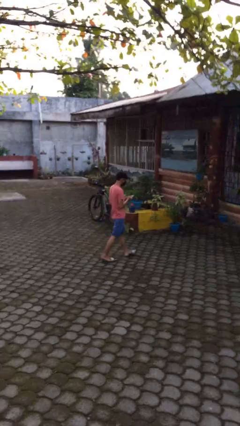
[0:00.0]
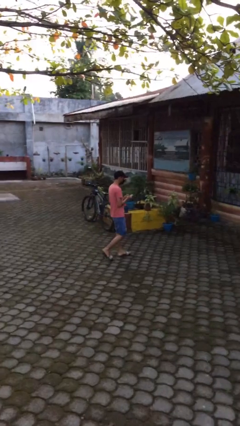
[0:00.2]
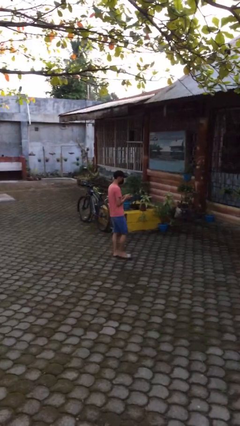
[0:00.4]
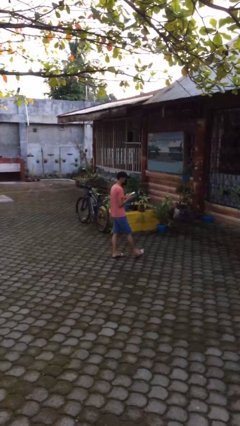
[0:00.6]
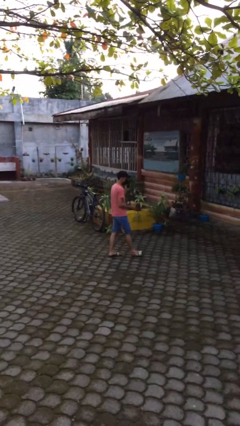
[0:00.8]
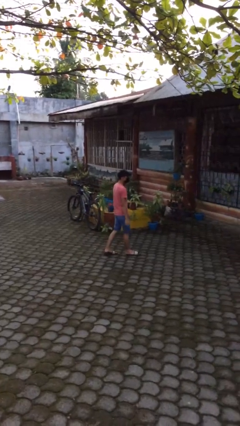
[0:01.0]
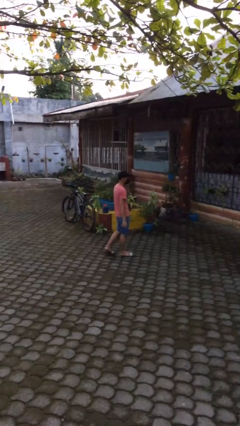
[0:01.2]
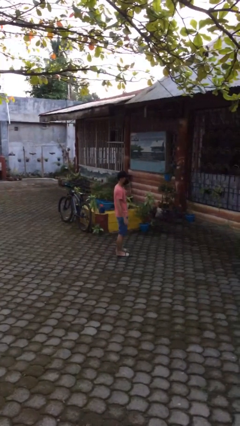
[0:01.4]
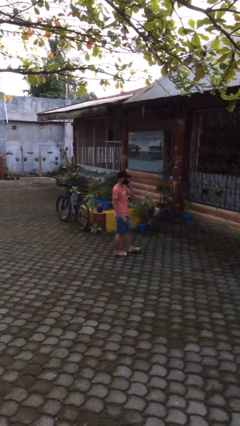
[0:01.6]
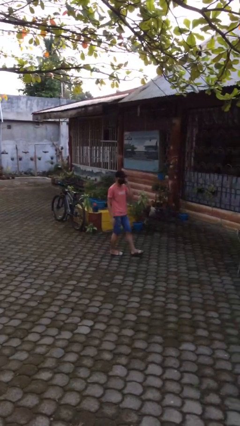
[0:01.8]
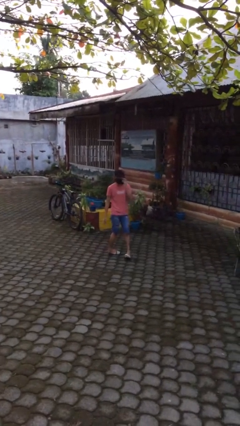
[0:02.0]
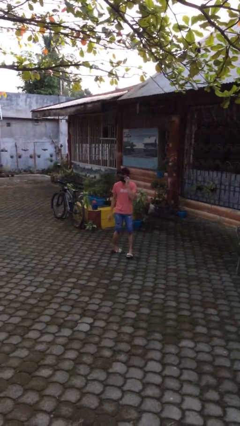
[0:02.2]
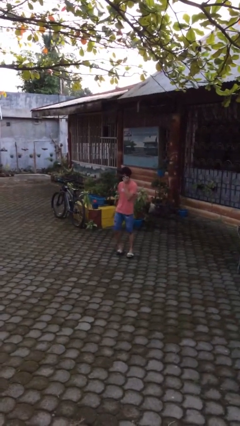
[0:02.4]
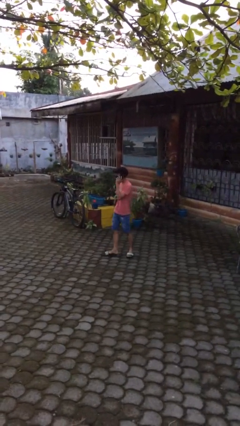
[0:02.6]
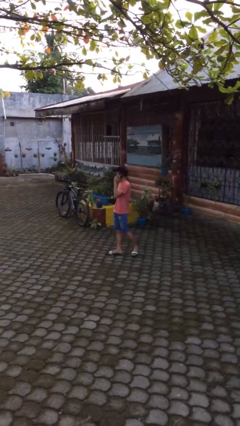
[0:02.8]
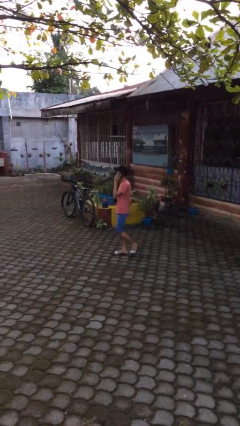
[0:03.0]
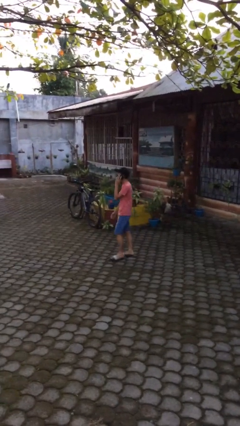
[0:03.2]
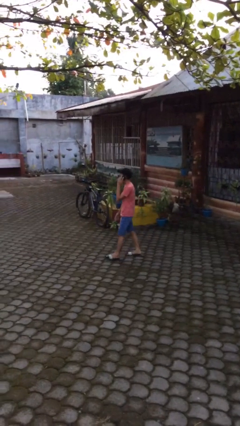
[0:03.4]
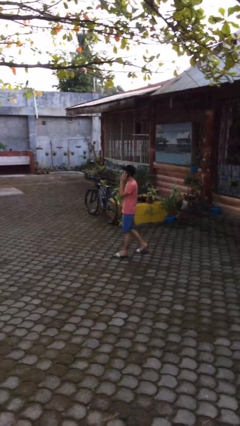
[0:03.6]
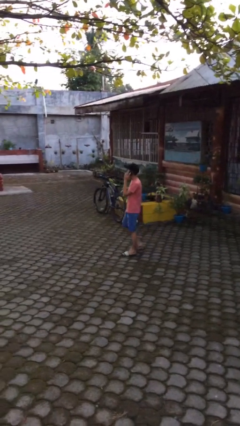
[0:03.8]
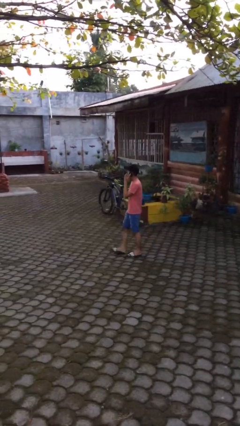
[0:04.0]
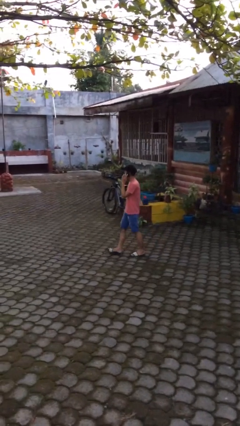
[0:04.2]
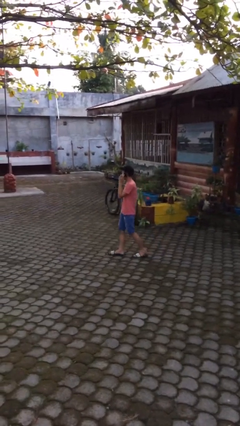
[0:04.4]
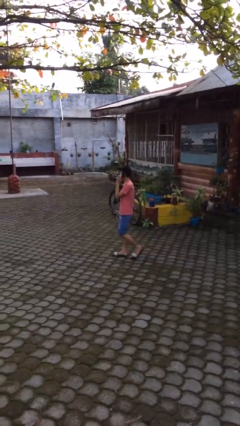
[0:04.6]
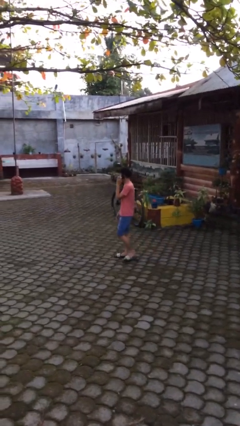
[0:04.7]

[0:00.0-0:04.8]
person talks on phone

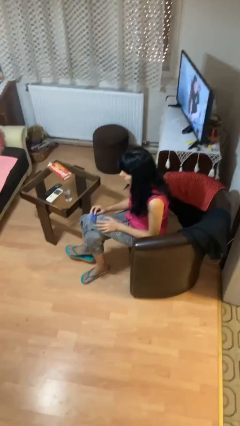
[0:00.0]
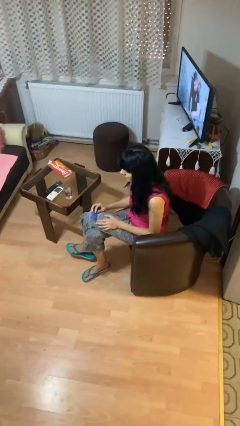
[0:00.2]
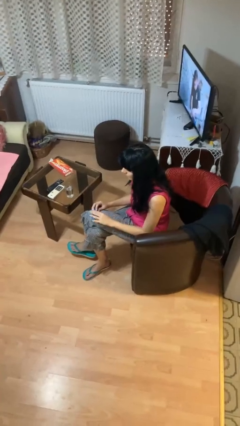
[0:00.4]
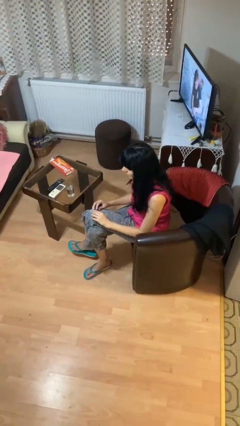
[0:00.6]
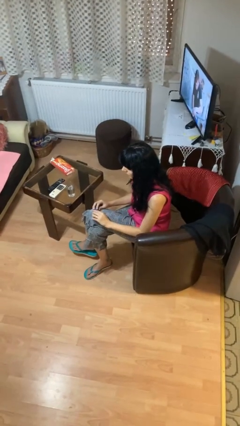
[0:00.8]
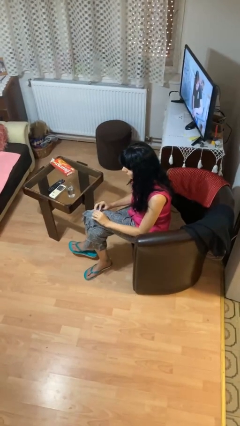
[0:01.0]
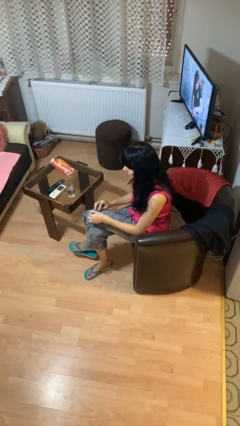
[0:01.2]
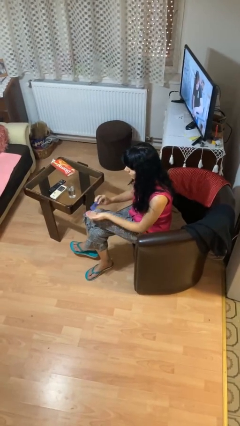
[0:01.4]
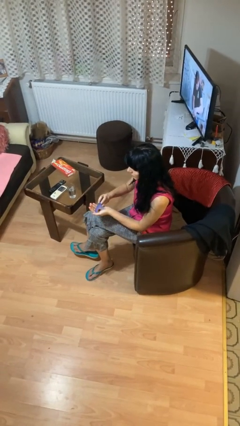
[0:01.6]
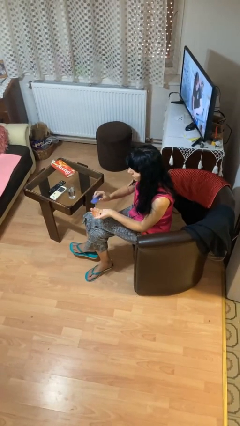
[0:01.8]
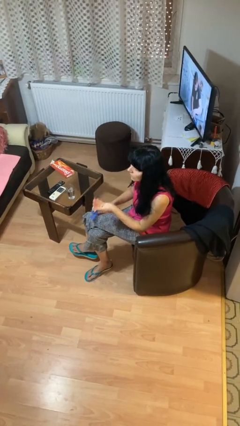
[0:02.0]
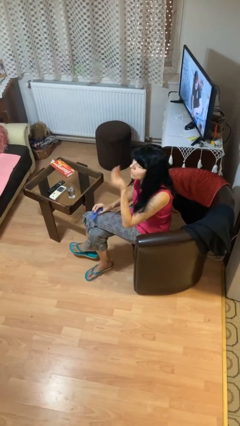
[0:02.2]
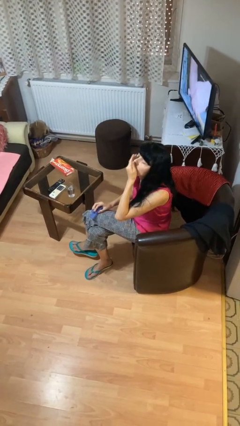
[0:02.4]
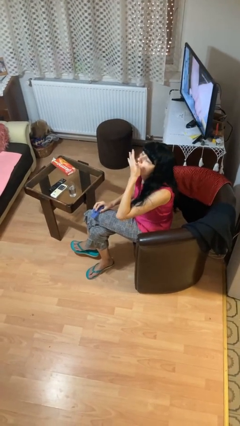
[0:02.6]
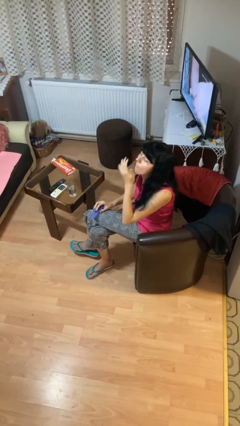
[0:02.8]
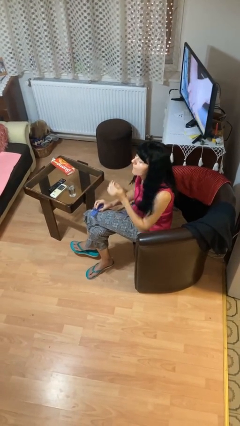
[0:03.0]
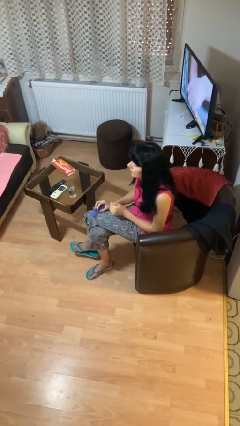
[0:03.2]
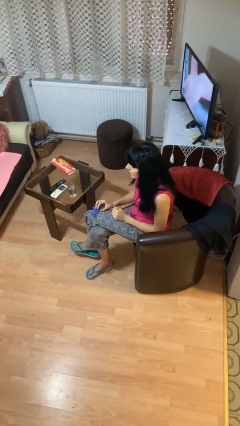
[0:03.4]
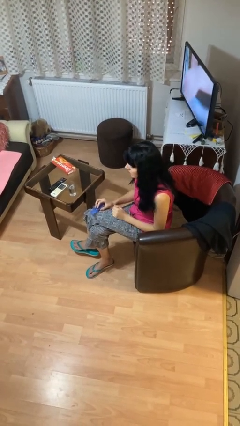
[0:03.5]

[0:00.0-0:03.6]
person takes medicine pills

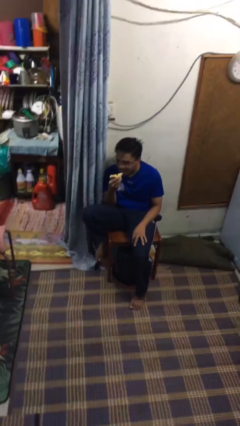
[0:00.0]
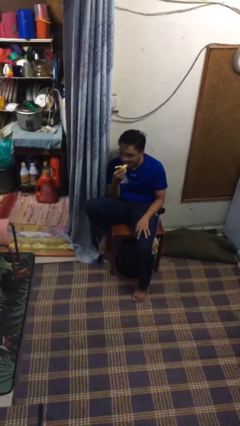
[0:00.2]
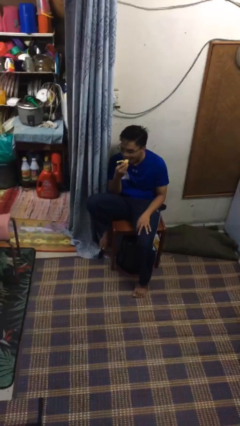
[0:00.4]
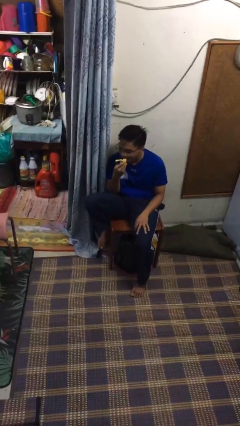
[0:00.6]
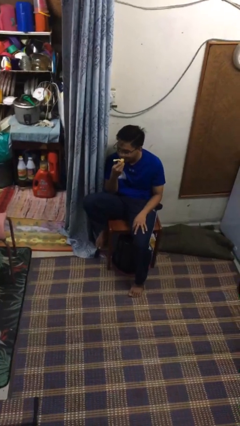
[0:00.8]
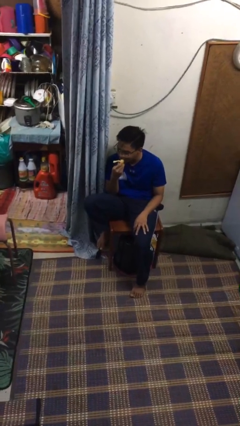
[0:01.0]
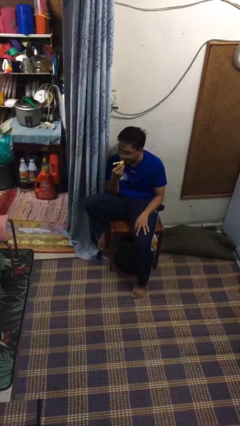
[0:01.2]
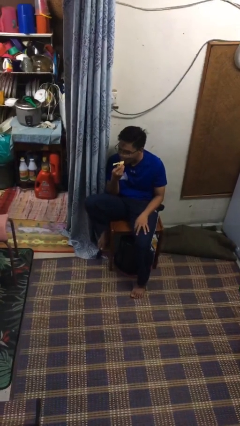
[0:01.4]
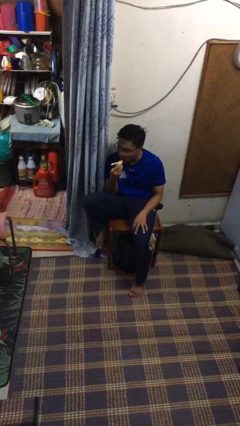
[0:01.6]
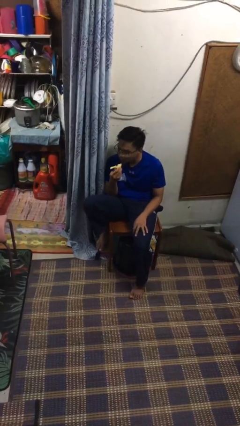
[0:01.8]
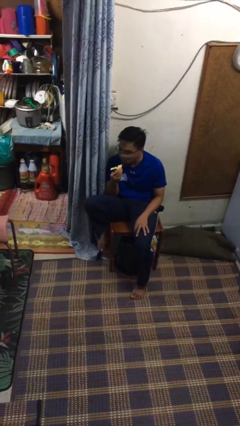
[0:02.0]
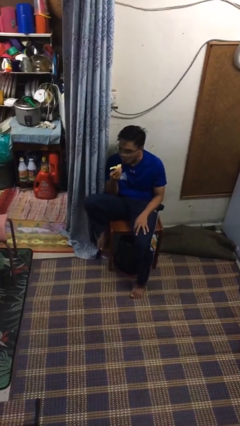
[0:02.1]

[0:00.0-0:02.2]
person eats banana

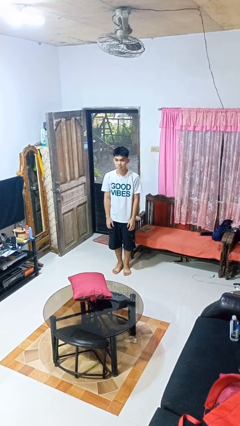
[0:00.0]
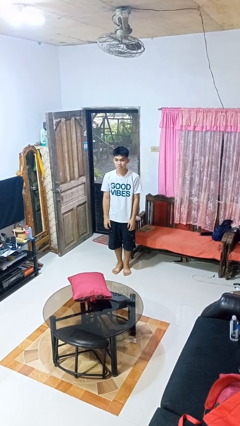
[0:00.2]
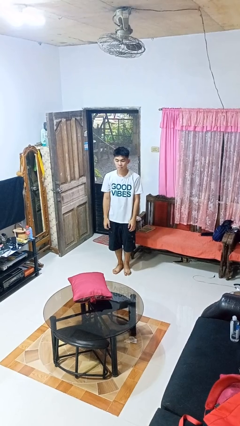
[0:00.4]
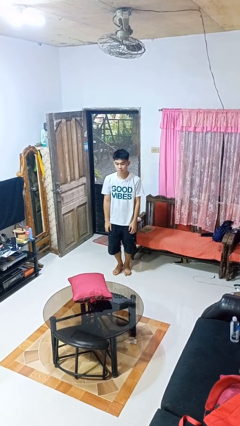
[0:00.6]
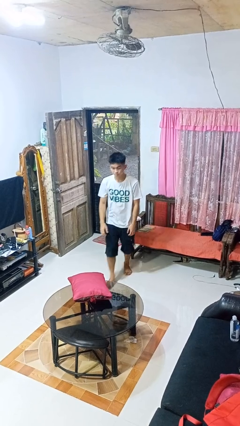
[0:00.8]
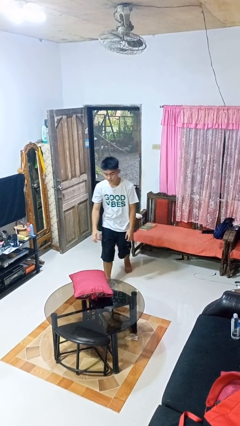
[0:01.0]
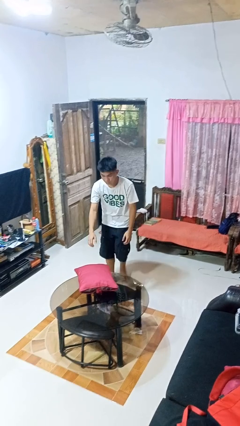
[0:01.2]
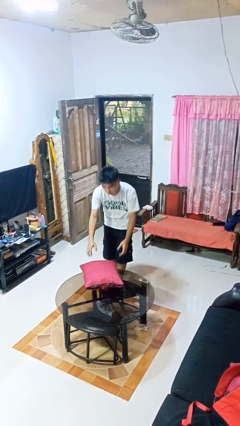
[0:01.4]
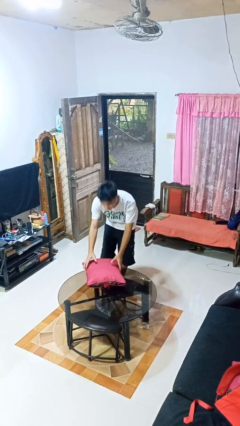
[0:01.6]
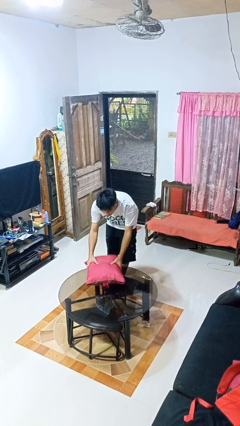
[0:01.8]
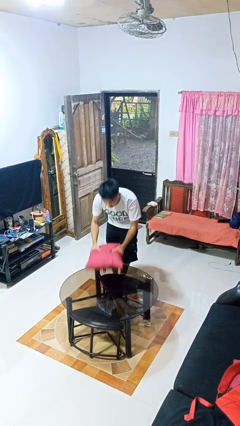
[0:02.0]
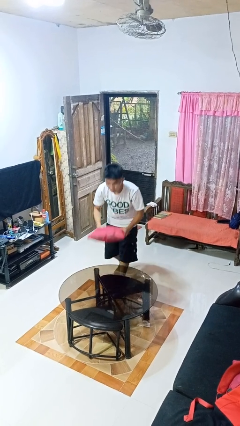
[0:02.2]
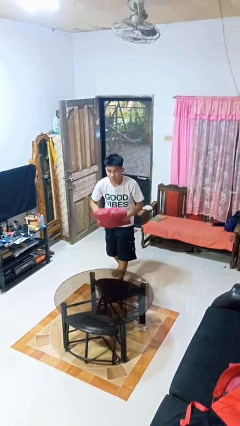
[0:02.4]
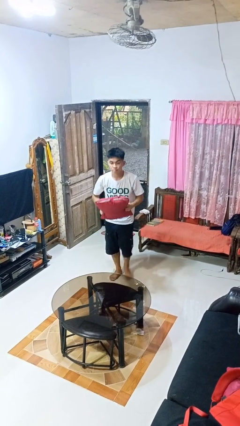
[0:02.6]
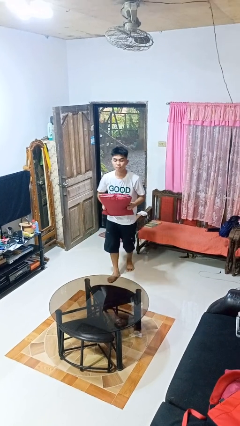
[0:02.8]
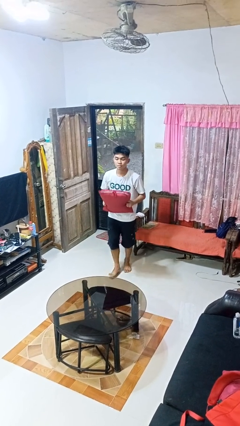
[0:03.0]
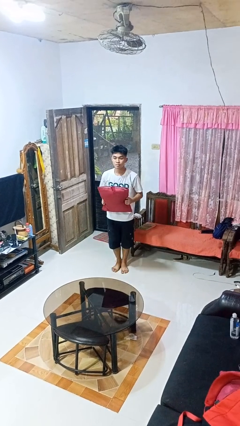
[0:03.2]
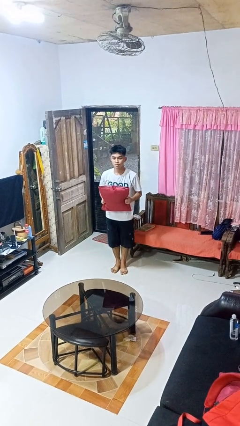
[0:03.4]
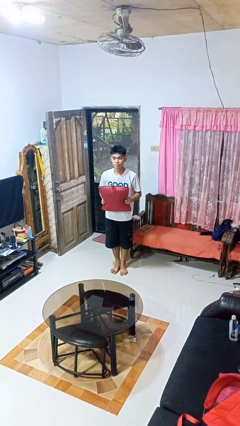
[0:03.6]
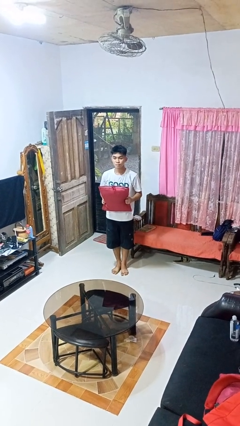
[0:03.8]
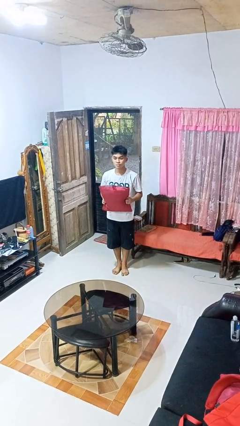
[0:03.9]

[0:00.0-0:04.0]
person picks up object from table

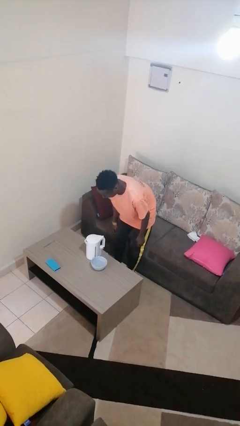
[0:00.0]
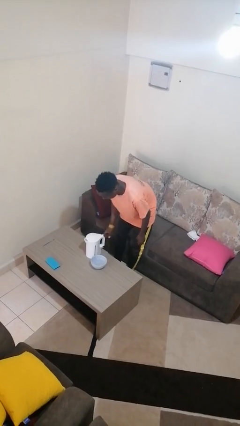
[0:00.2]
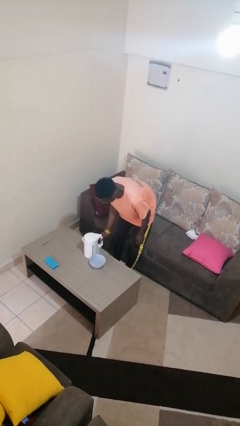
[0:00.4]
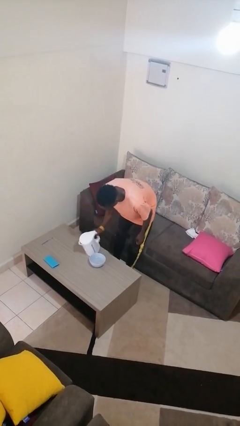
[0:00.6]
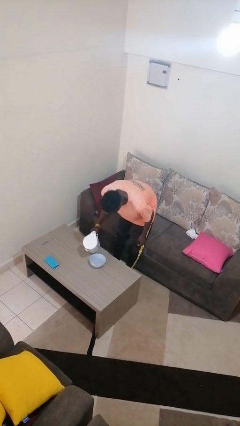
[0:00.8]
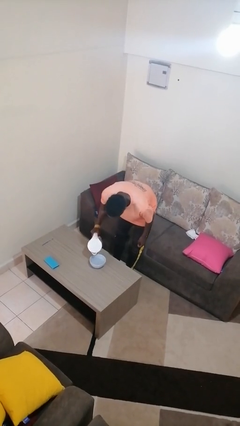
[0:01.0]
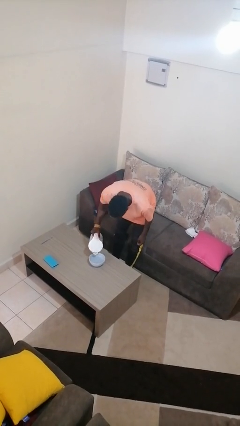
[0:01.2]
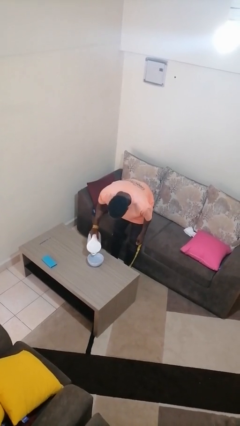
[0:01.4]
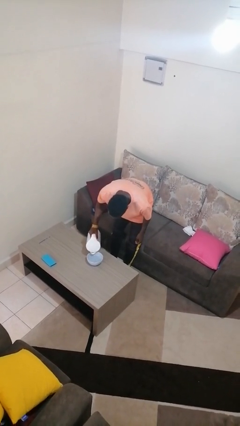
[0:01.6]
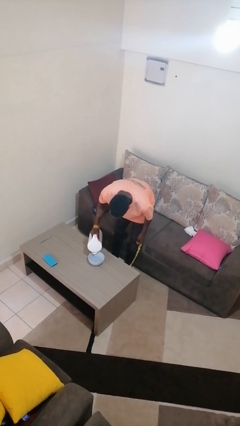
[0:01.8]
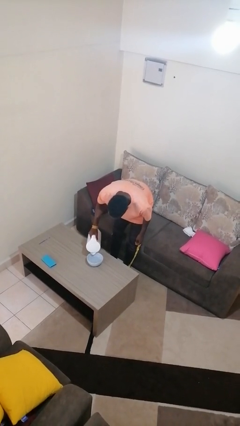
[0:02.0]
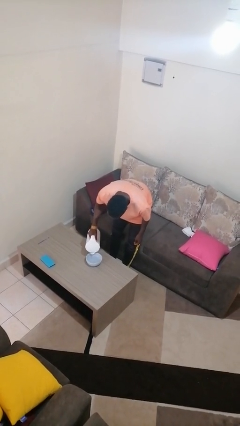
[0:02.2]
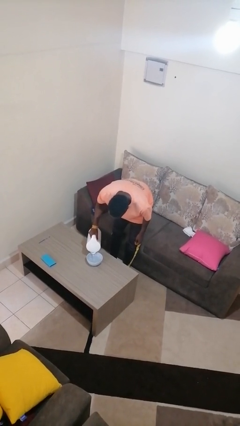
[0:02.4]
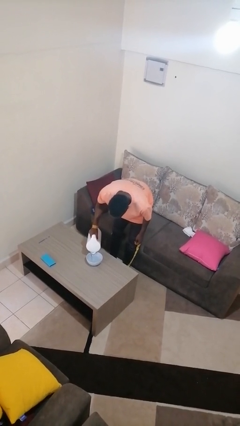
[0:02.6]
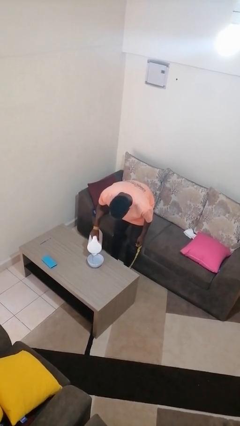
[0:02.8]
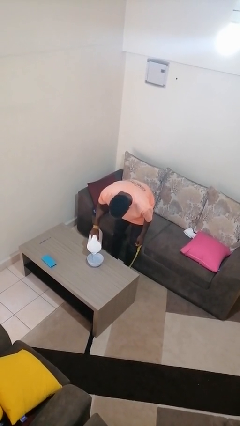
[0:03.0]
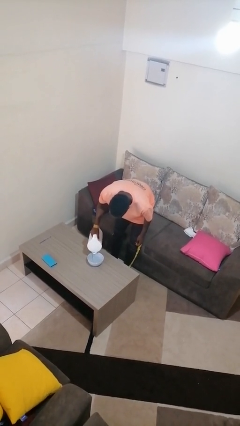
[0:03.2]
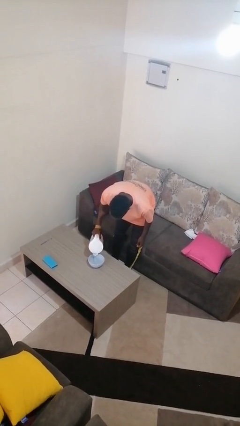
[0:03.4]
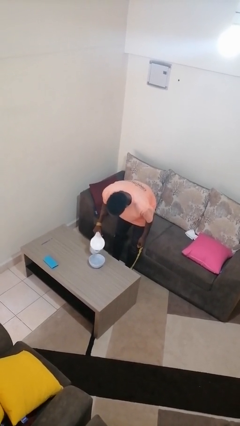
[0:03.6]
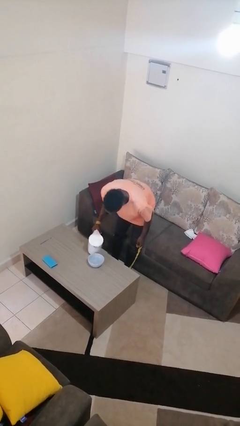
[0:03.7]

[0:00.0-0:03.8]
person pours into bowl
